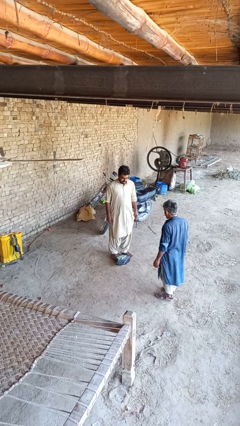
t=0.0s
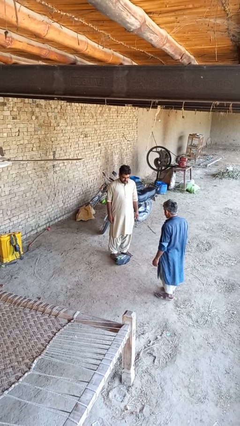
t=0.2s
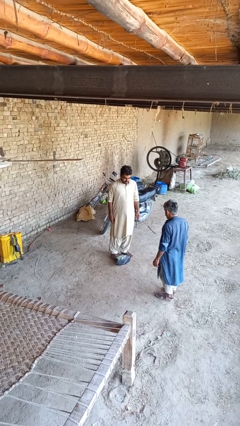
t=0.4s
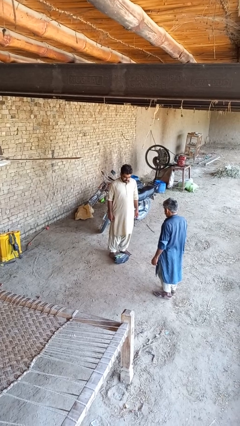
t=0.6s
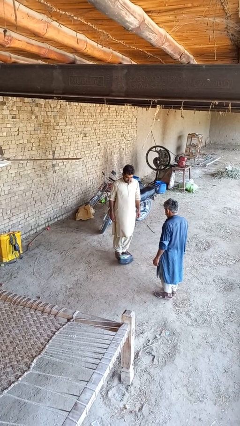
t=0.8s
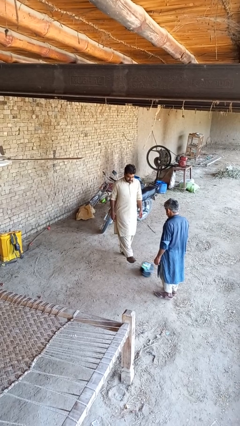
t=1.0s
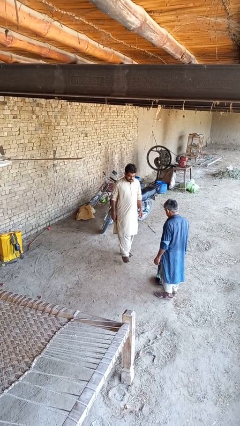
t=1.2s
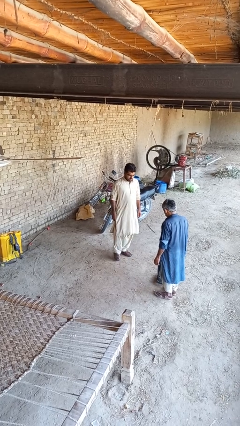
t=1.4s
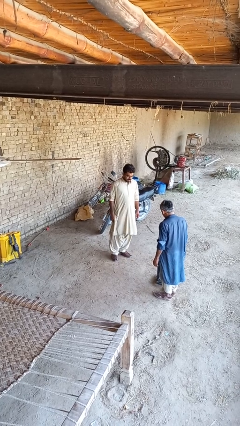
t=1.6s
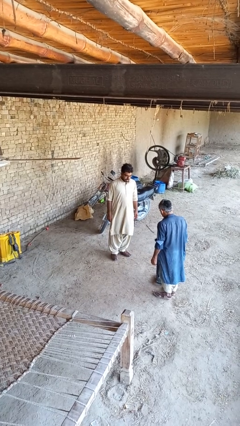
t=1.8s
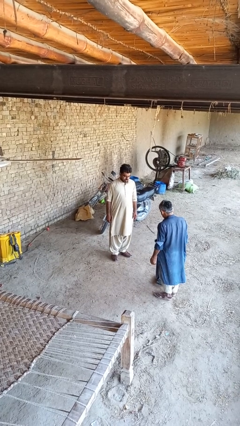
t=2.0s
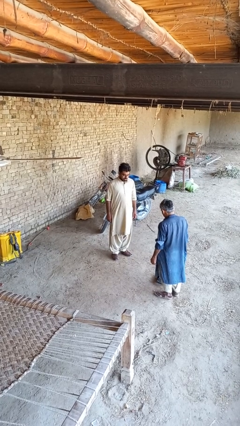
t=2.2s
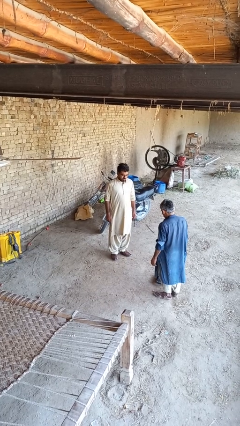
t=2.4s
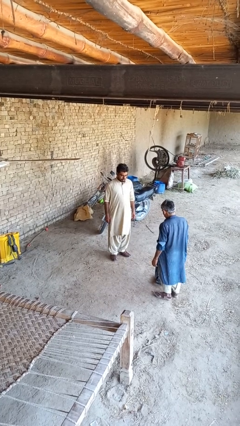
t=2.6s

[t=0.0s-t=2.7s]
person kicks object to person

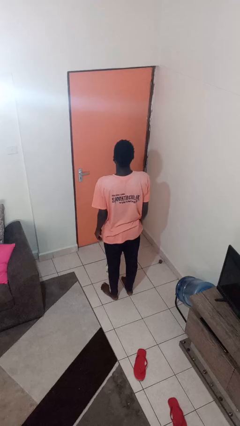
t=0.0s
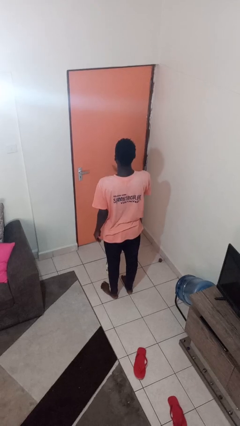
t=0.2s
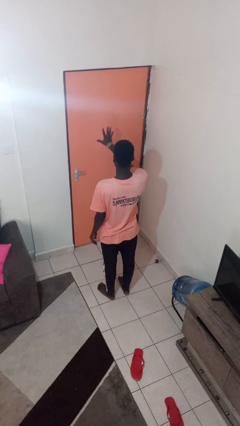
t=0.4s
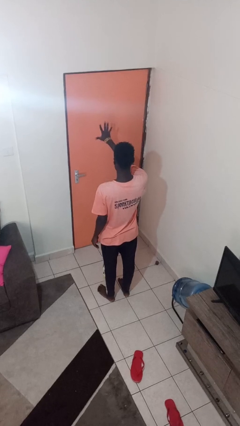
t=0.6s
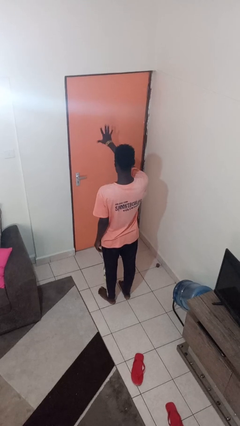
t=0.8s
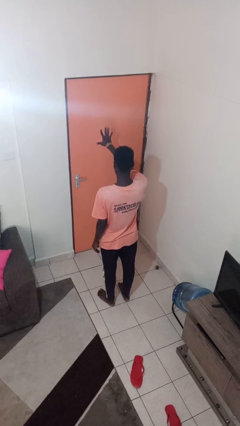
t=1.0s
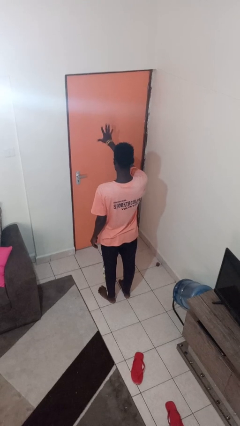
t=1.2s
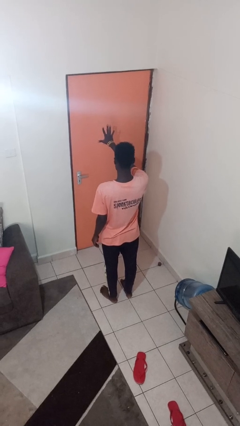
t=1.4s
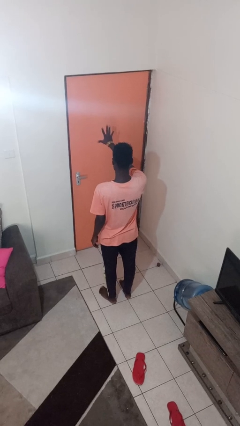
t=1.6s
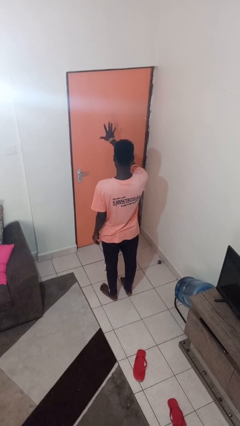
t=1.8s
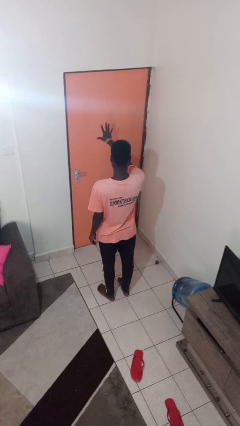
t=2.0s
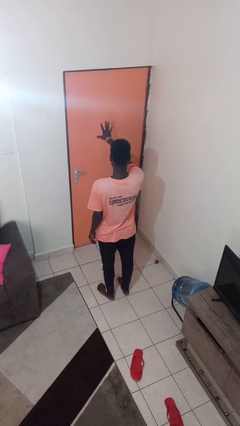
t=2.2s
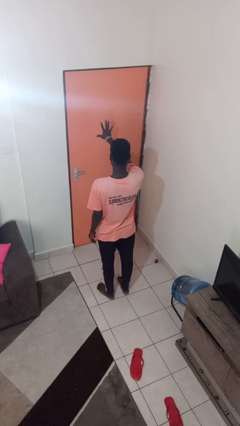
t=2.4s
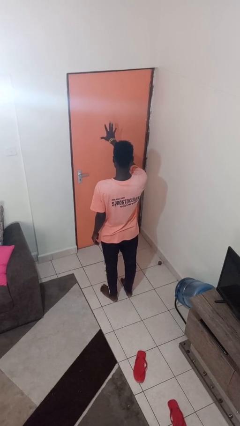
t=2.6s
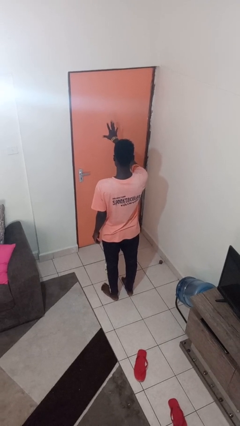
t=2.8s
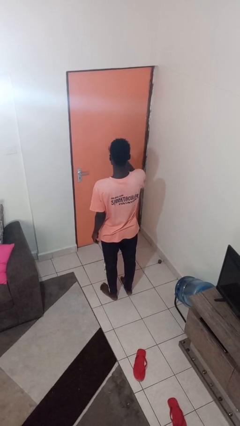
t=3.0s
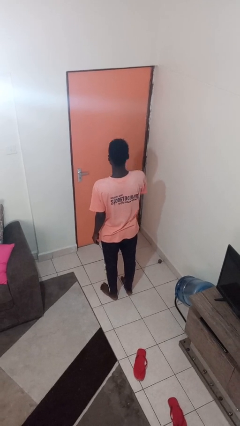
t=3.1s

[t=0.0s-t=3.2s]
person gestures number five

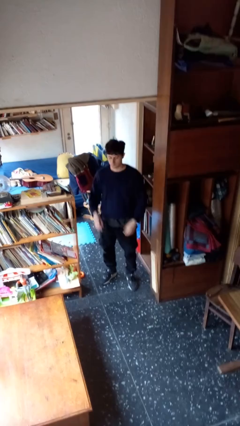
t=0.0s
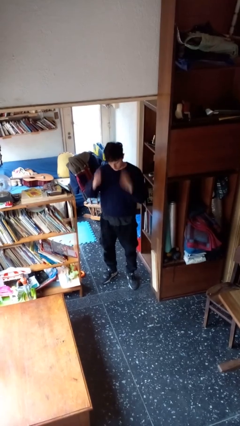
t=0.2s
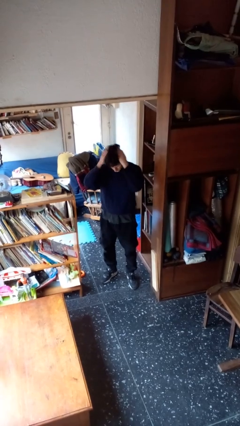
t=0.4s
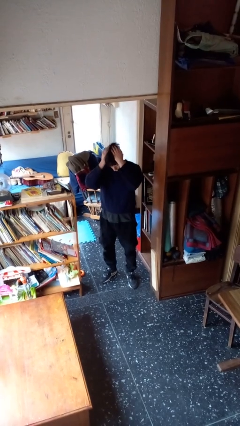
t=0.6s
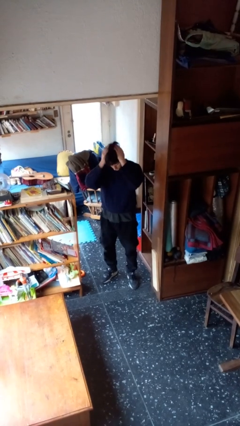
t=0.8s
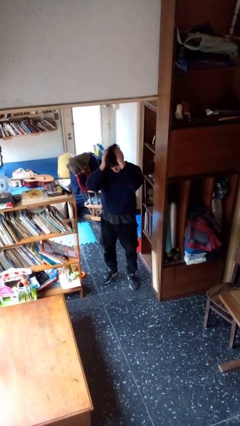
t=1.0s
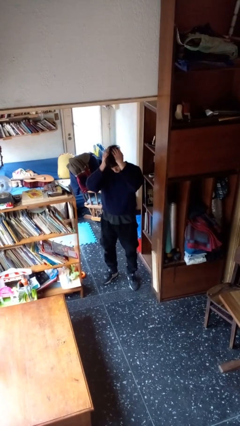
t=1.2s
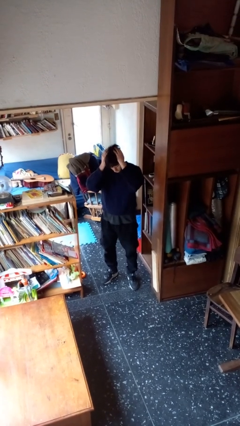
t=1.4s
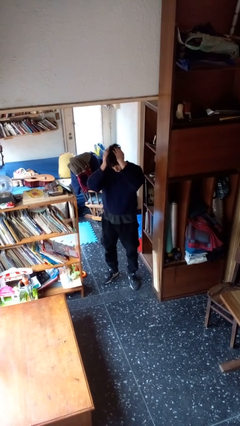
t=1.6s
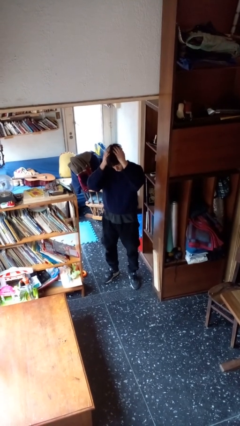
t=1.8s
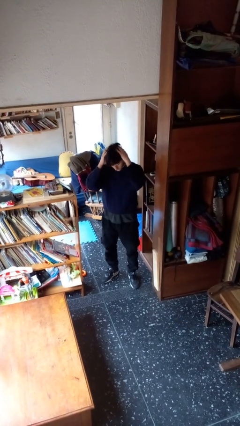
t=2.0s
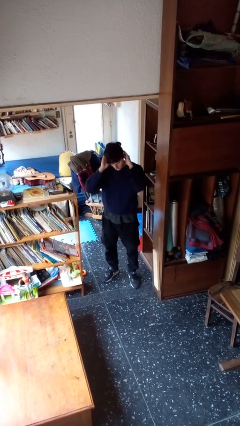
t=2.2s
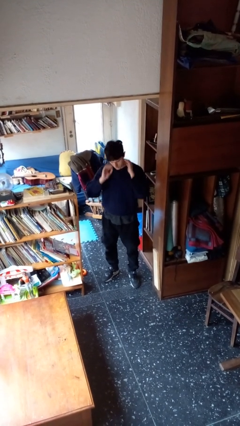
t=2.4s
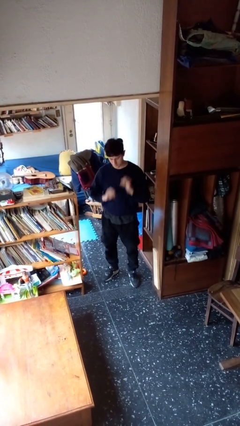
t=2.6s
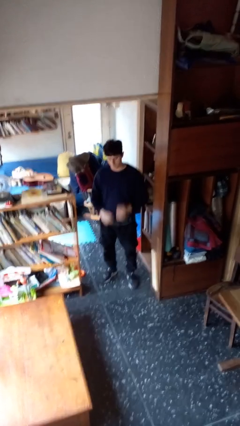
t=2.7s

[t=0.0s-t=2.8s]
person pats head

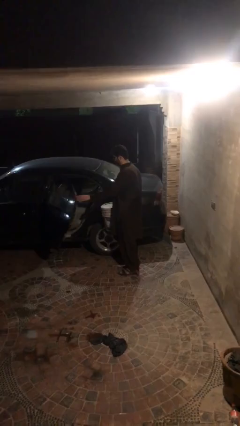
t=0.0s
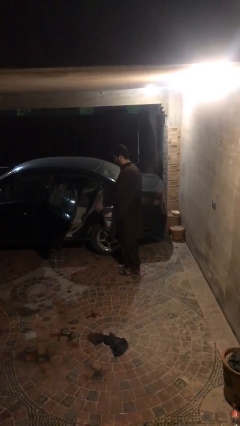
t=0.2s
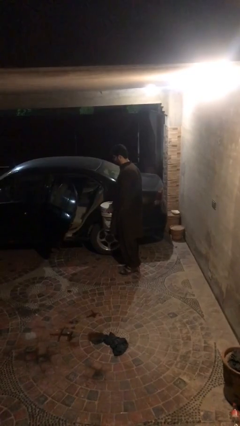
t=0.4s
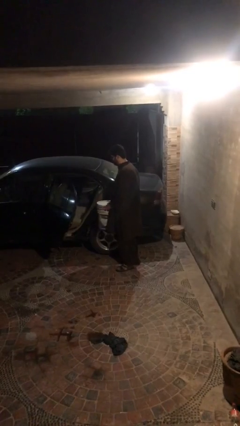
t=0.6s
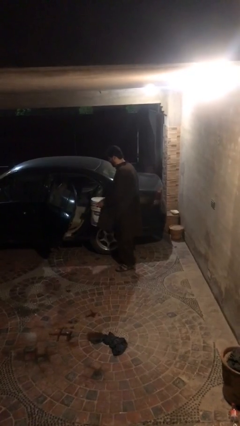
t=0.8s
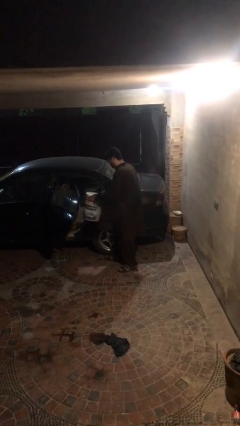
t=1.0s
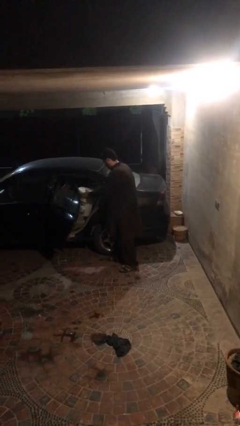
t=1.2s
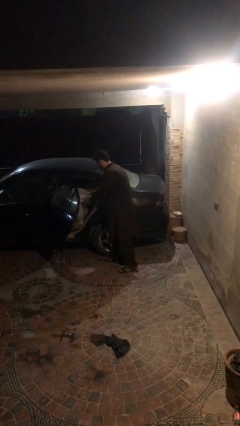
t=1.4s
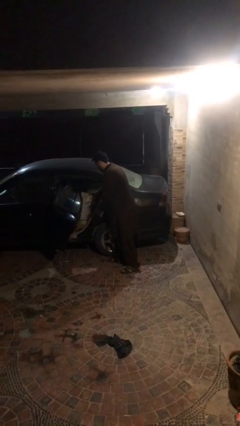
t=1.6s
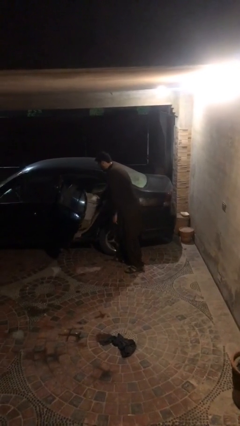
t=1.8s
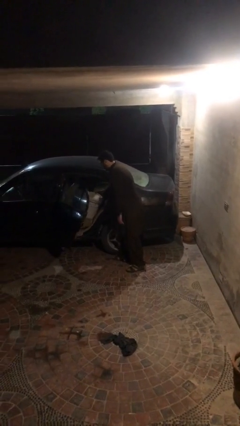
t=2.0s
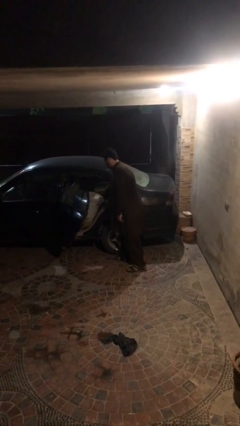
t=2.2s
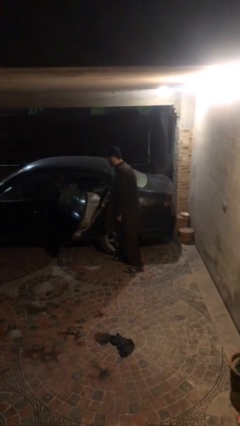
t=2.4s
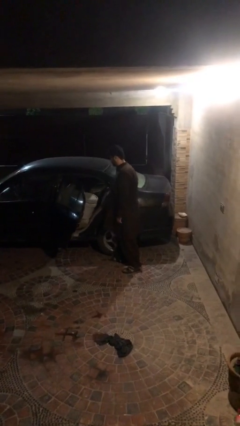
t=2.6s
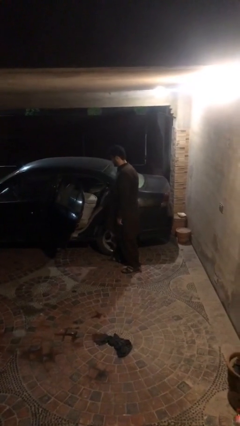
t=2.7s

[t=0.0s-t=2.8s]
person loads car

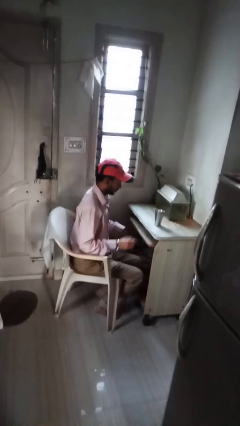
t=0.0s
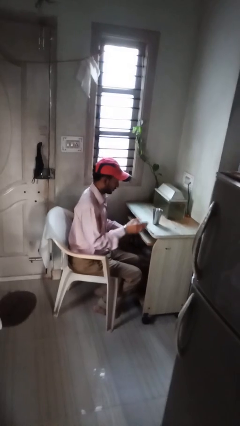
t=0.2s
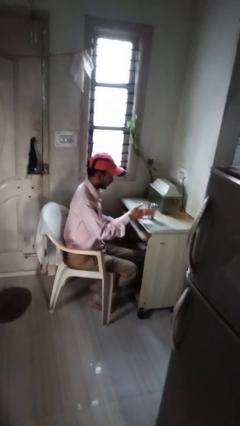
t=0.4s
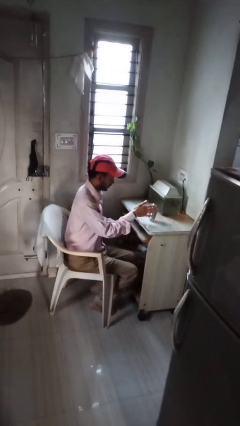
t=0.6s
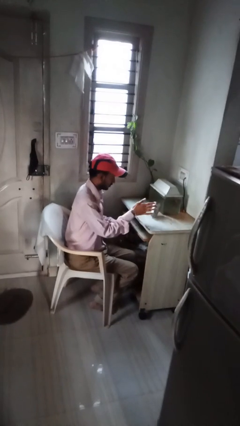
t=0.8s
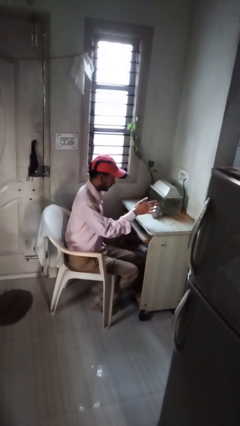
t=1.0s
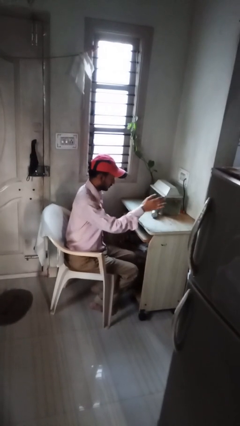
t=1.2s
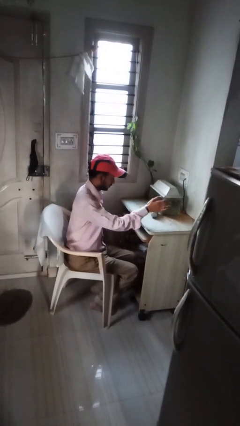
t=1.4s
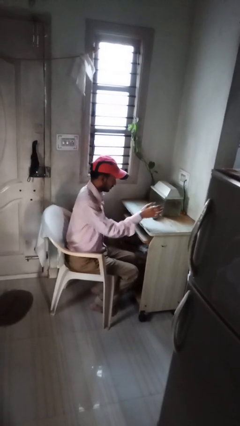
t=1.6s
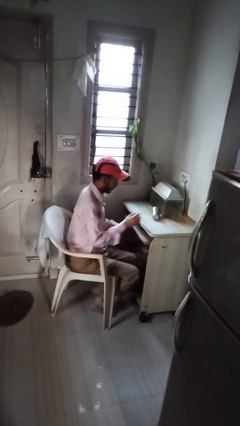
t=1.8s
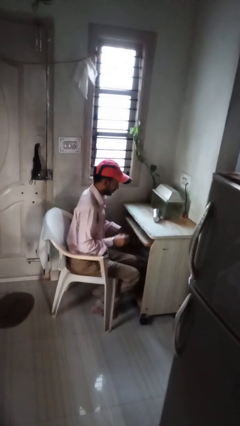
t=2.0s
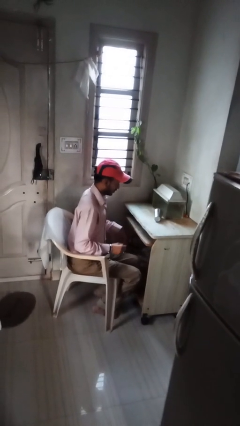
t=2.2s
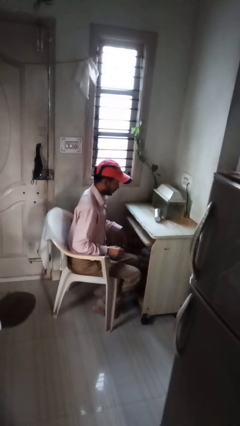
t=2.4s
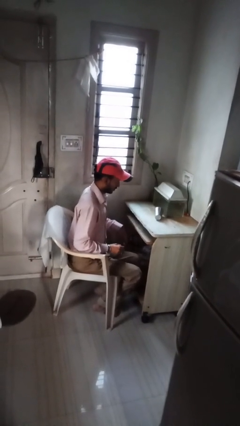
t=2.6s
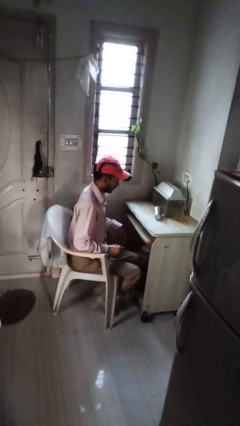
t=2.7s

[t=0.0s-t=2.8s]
person knocks over glass

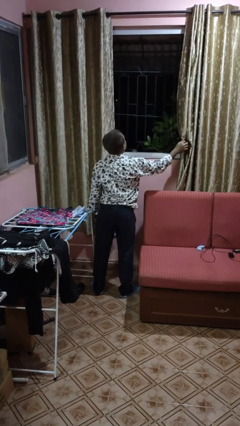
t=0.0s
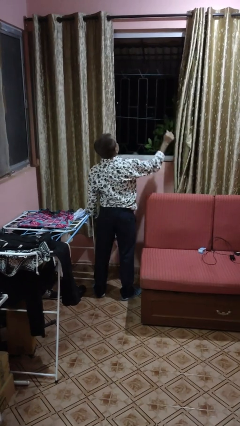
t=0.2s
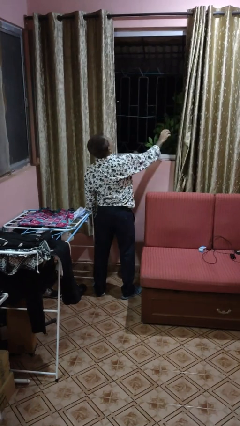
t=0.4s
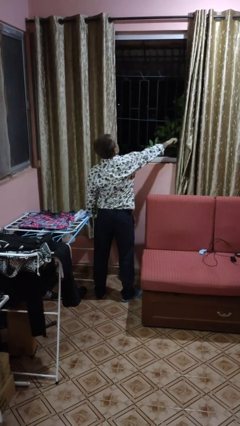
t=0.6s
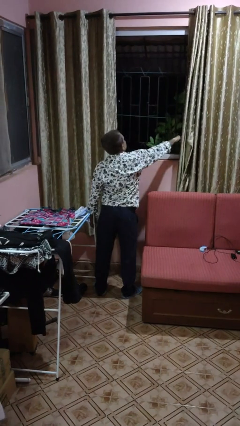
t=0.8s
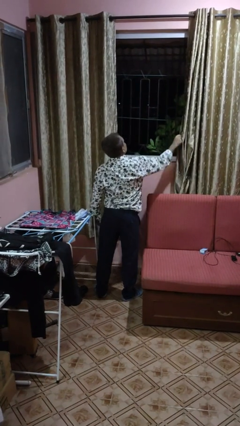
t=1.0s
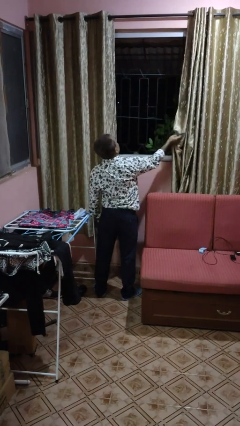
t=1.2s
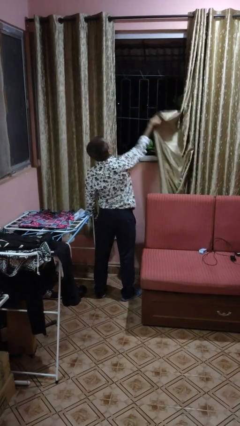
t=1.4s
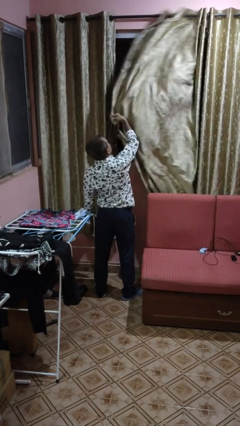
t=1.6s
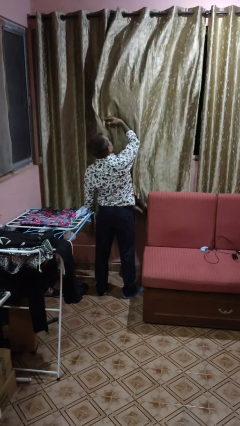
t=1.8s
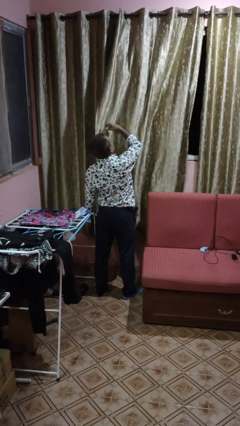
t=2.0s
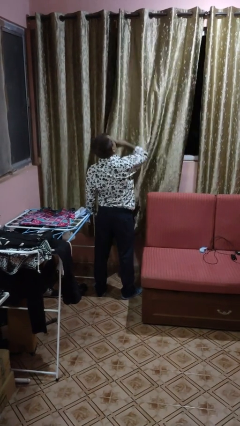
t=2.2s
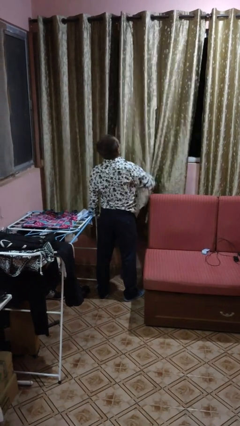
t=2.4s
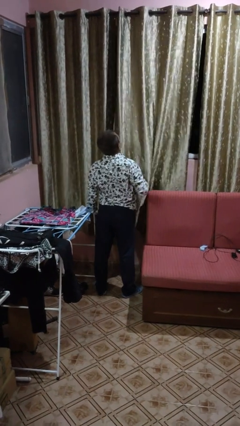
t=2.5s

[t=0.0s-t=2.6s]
person closes curtains

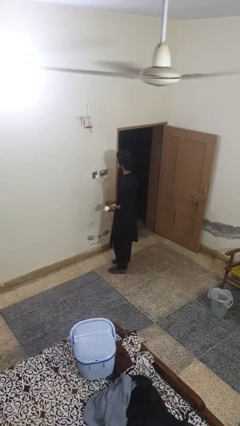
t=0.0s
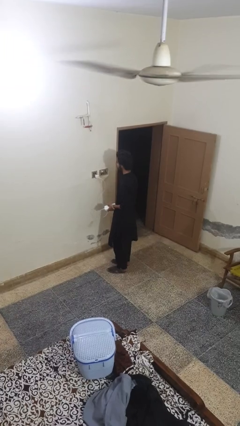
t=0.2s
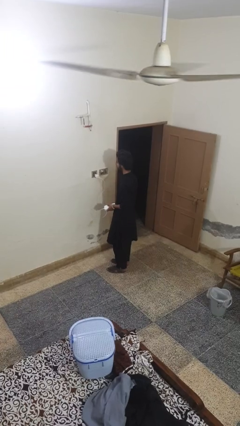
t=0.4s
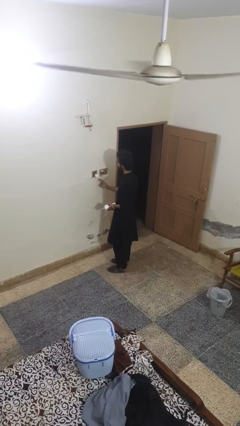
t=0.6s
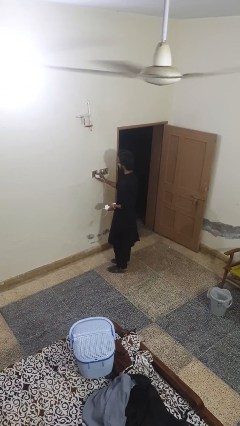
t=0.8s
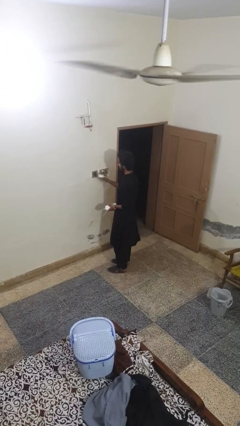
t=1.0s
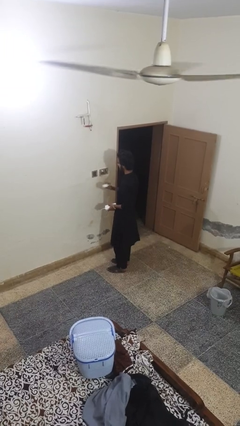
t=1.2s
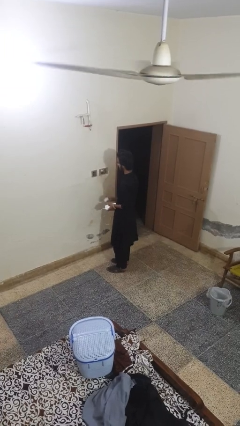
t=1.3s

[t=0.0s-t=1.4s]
person unplugs from electrical socket
